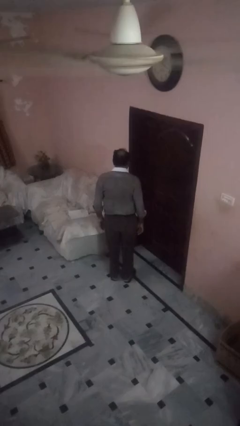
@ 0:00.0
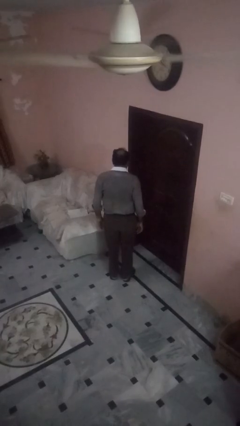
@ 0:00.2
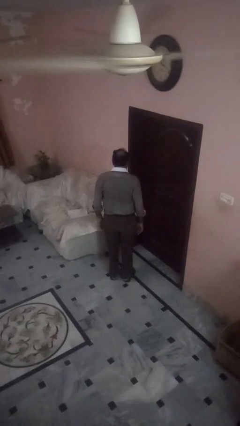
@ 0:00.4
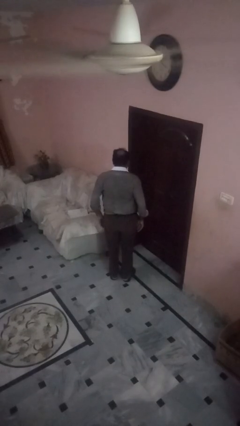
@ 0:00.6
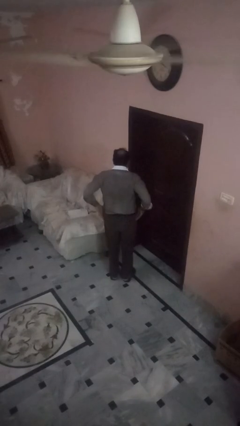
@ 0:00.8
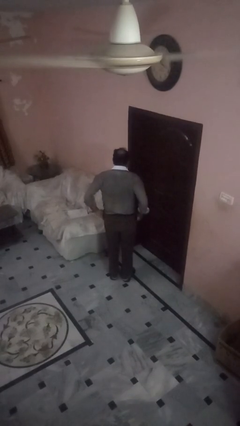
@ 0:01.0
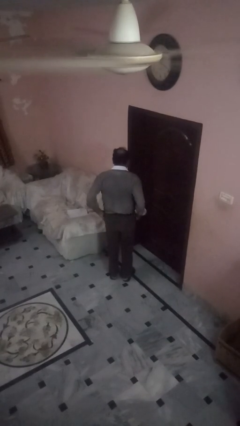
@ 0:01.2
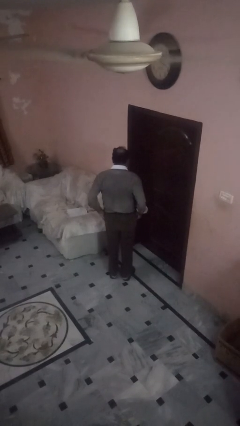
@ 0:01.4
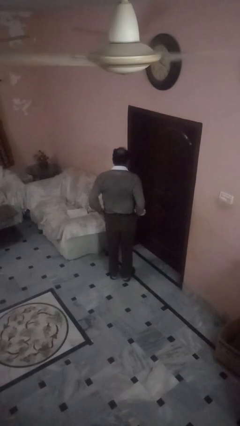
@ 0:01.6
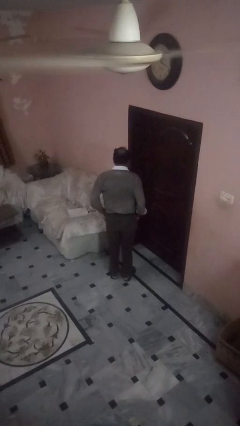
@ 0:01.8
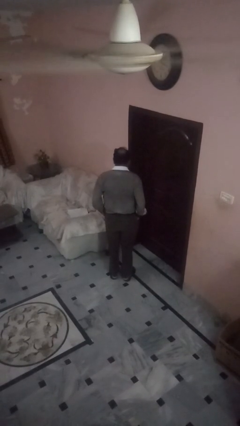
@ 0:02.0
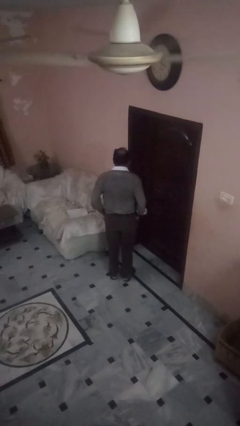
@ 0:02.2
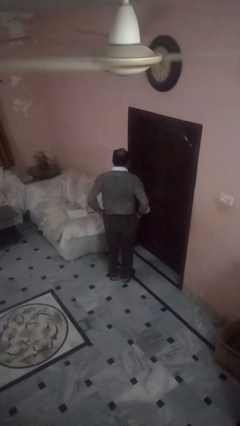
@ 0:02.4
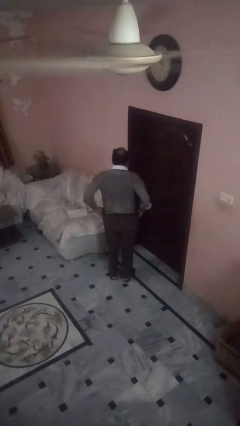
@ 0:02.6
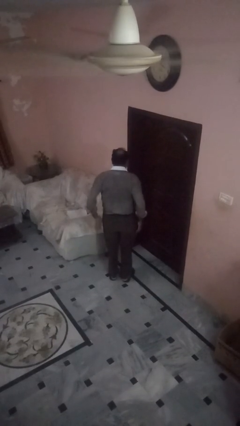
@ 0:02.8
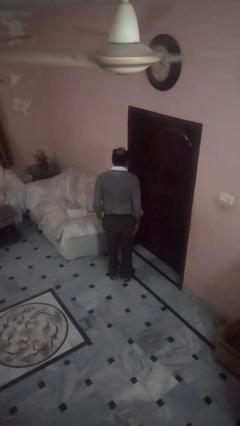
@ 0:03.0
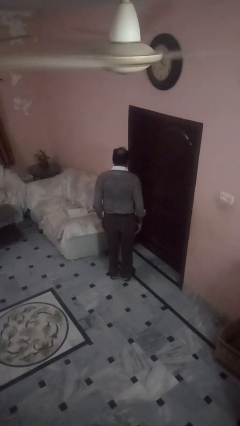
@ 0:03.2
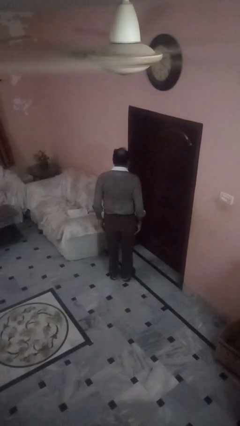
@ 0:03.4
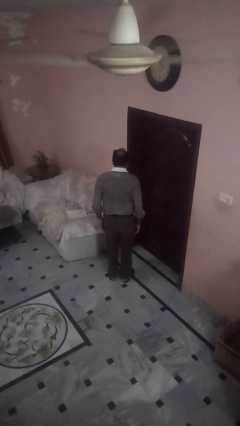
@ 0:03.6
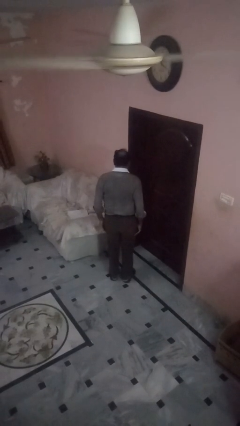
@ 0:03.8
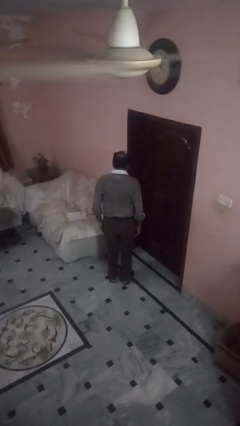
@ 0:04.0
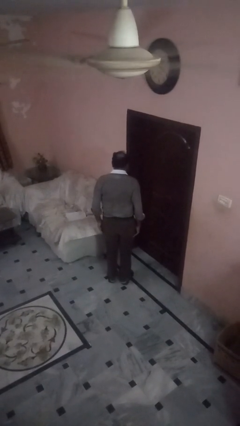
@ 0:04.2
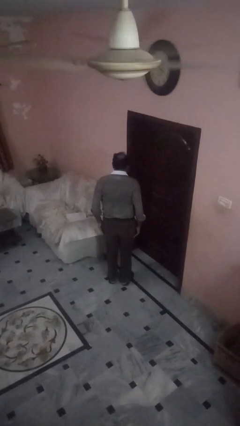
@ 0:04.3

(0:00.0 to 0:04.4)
person puts hands in back pockets

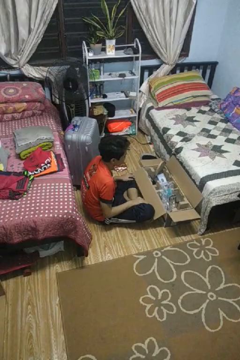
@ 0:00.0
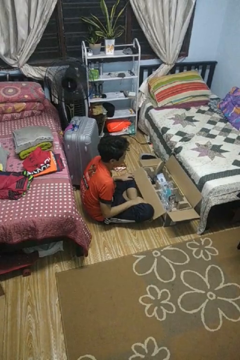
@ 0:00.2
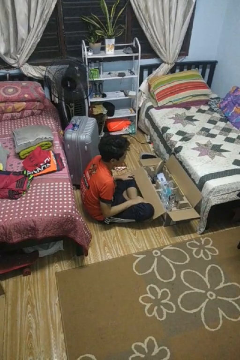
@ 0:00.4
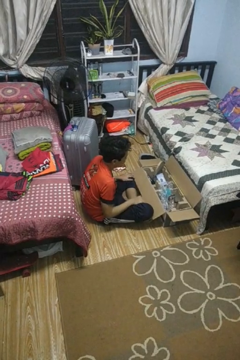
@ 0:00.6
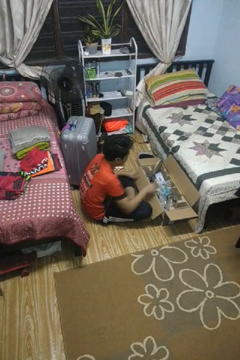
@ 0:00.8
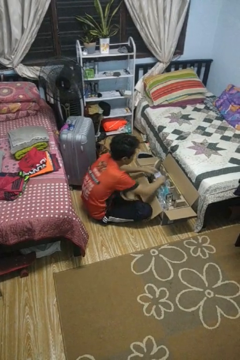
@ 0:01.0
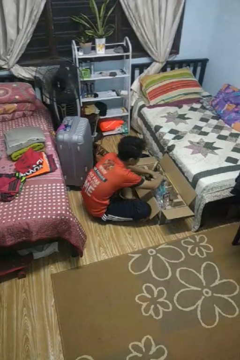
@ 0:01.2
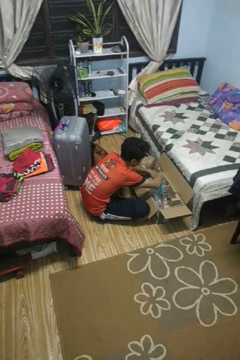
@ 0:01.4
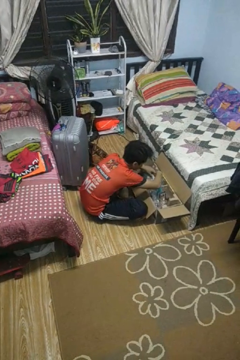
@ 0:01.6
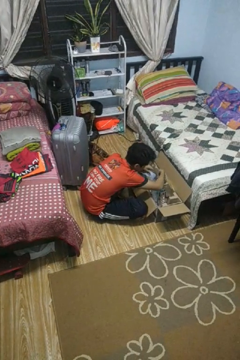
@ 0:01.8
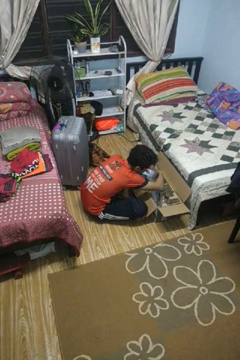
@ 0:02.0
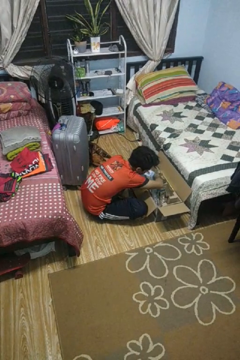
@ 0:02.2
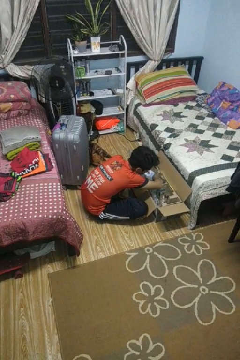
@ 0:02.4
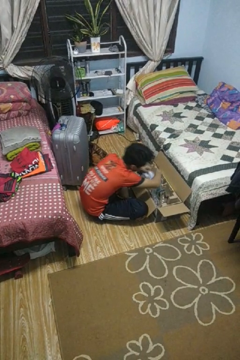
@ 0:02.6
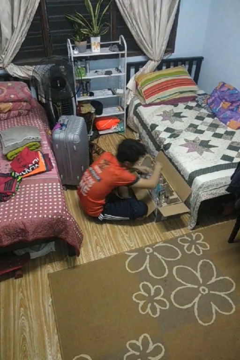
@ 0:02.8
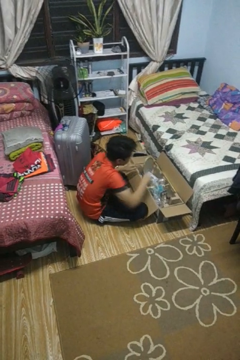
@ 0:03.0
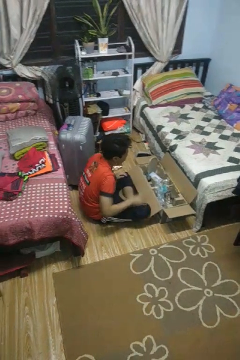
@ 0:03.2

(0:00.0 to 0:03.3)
person searches in box

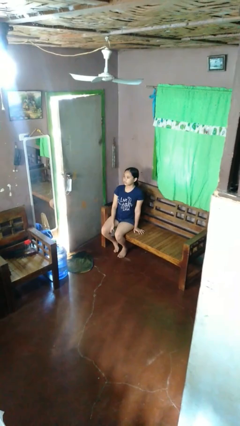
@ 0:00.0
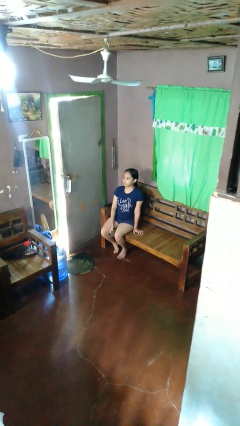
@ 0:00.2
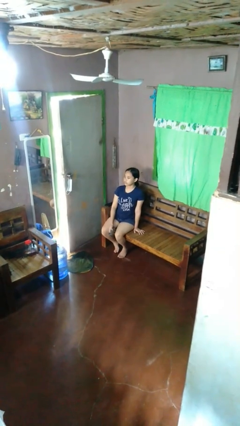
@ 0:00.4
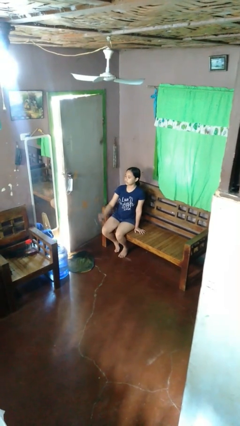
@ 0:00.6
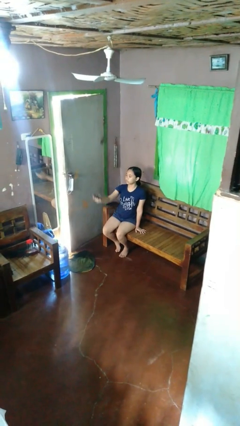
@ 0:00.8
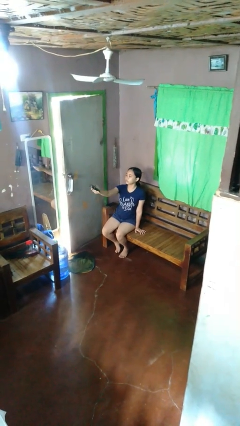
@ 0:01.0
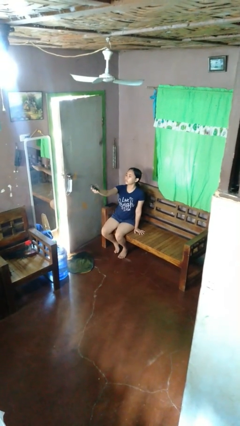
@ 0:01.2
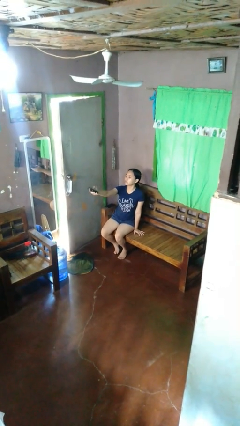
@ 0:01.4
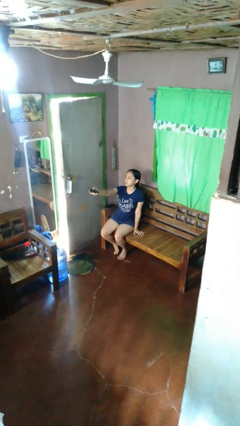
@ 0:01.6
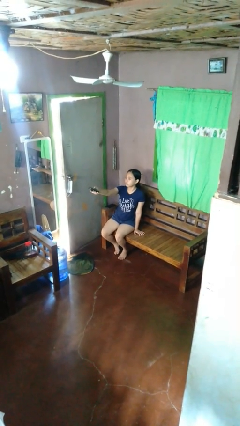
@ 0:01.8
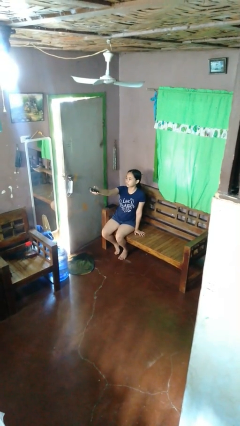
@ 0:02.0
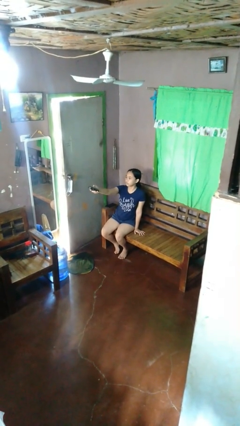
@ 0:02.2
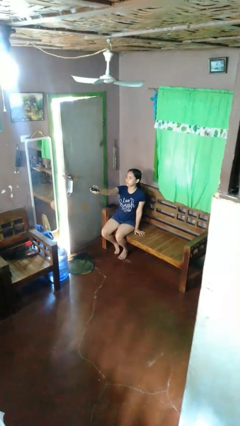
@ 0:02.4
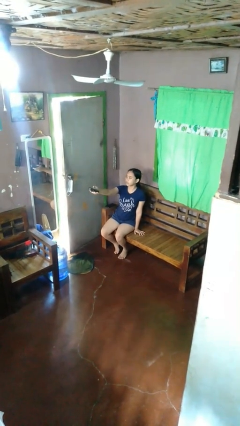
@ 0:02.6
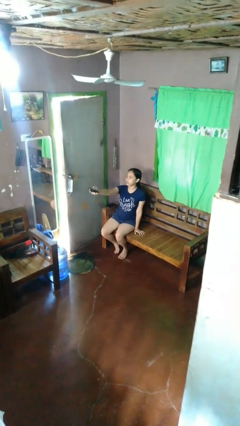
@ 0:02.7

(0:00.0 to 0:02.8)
person uses television remote

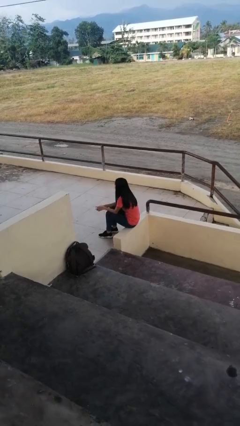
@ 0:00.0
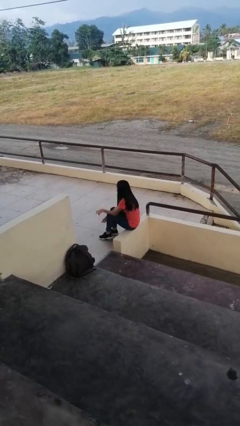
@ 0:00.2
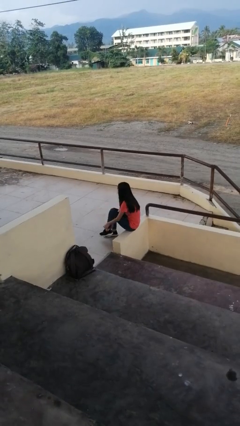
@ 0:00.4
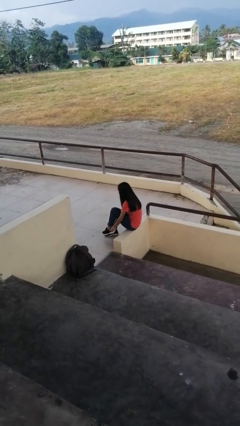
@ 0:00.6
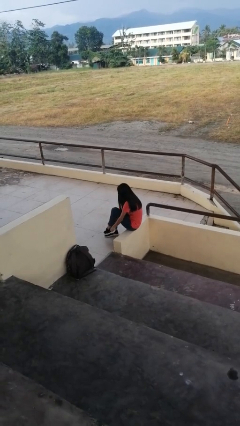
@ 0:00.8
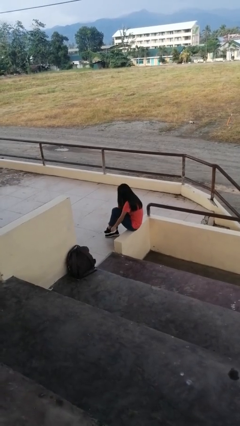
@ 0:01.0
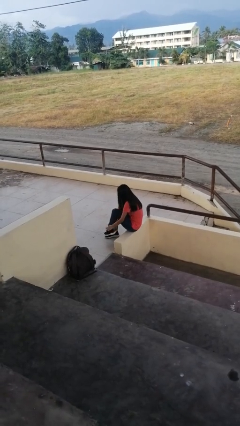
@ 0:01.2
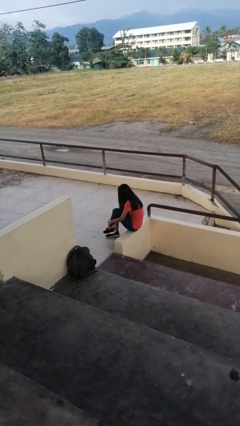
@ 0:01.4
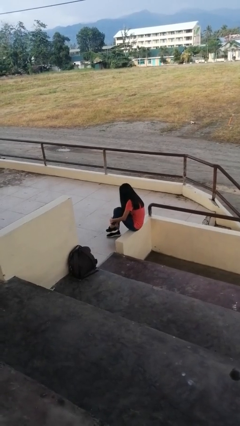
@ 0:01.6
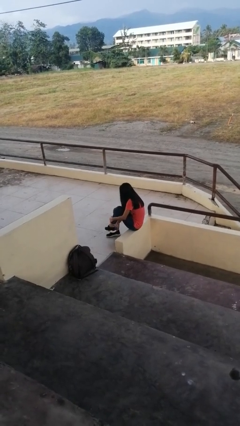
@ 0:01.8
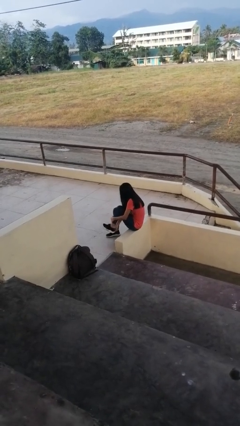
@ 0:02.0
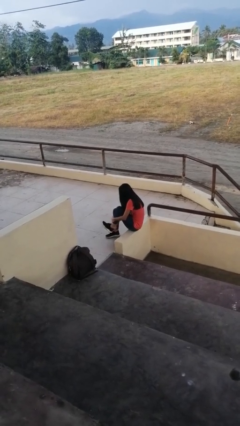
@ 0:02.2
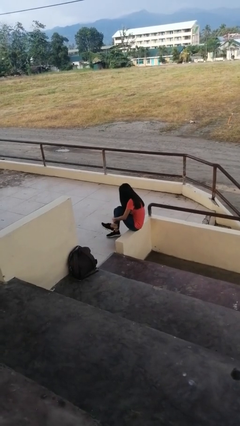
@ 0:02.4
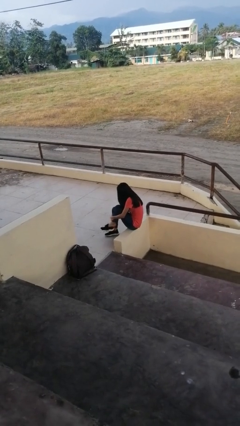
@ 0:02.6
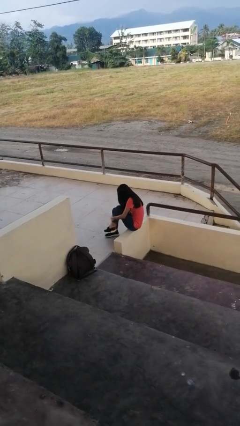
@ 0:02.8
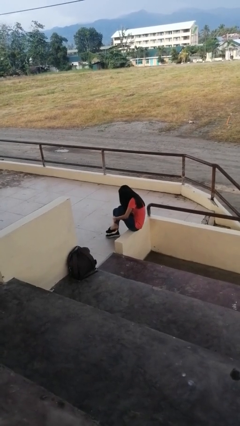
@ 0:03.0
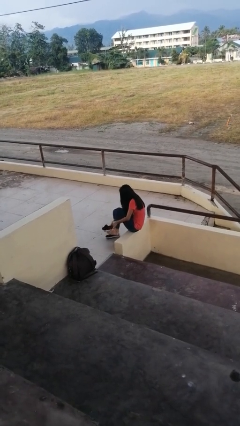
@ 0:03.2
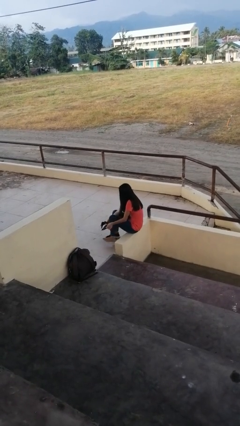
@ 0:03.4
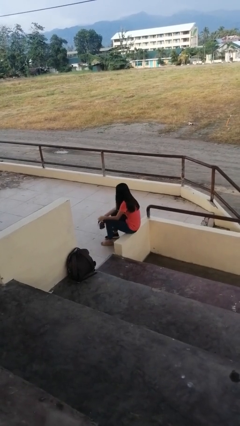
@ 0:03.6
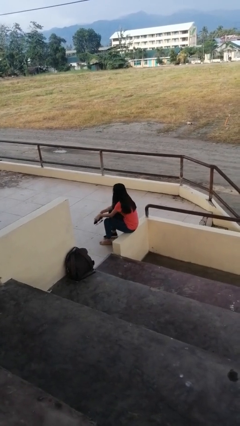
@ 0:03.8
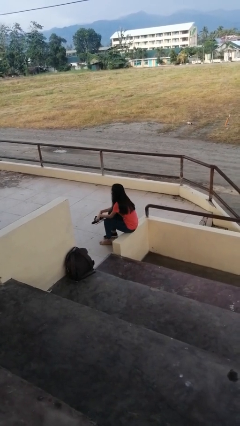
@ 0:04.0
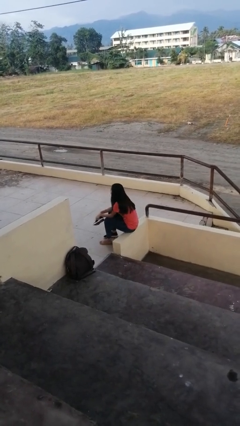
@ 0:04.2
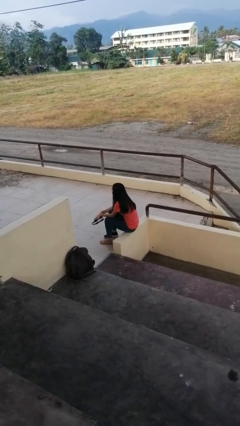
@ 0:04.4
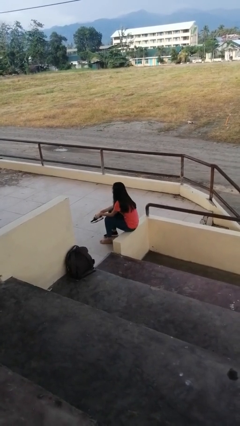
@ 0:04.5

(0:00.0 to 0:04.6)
person takes off shoes

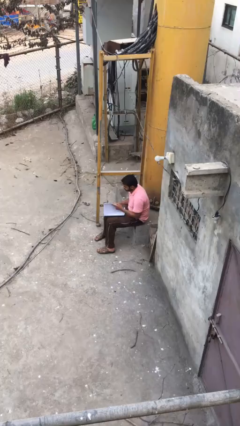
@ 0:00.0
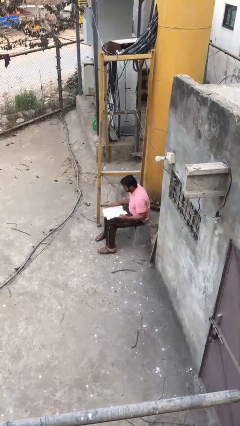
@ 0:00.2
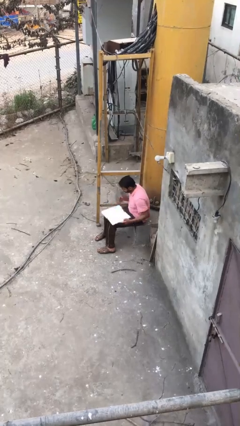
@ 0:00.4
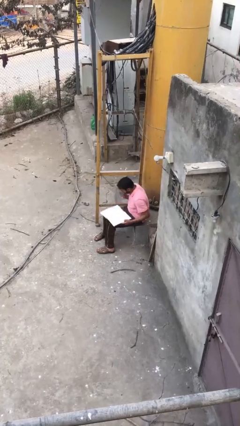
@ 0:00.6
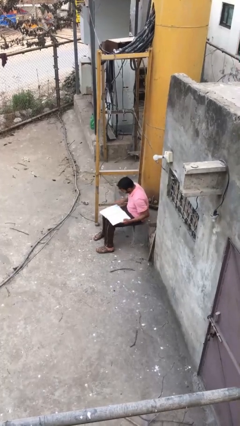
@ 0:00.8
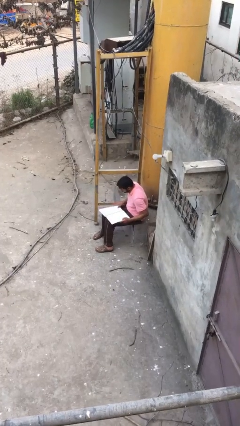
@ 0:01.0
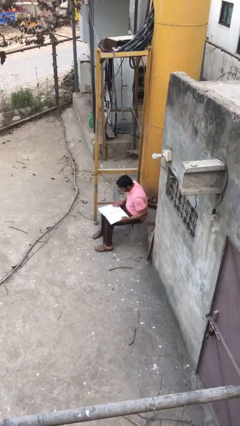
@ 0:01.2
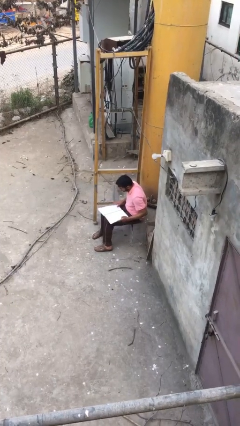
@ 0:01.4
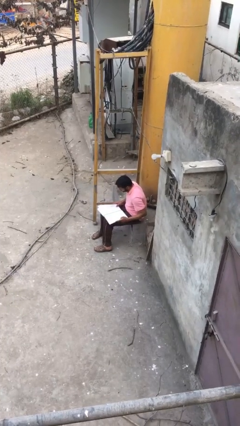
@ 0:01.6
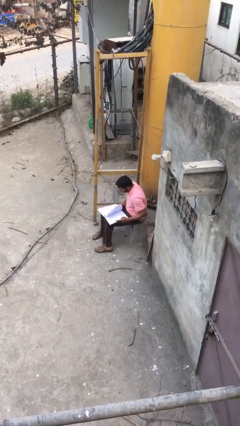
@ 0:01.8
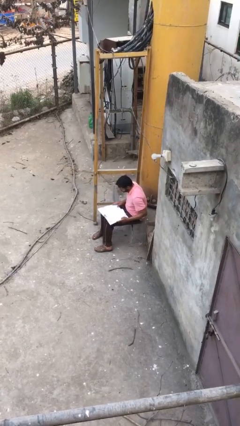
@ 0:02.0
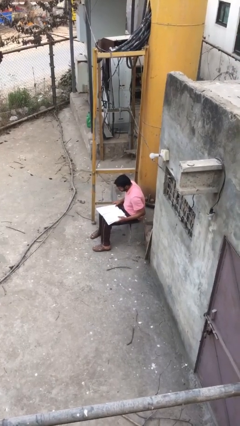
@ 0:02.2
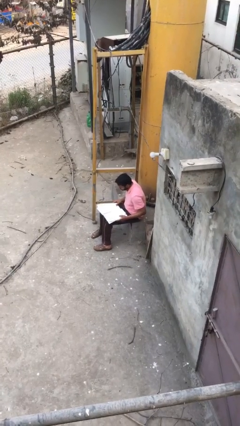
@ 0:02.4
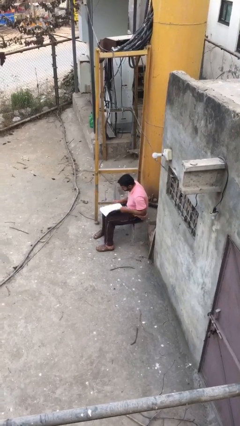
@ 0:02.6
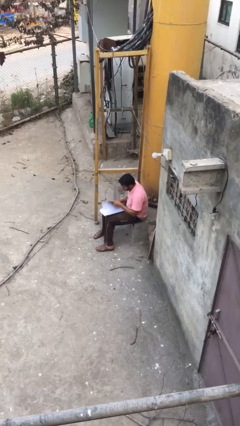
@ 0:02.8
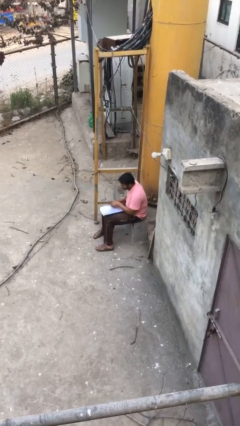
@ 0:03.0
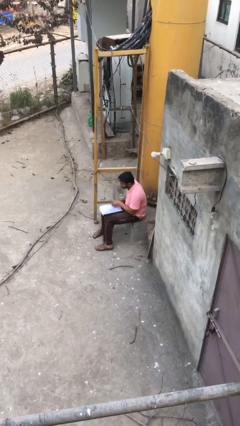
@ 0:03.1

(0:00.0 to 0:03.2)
person reads document
